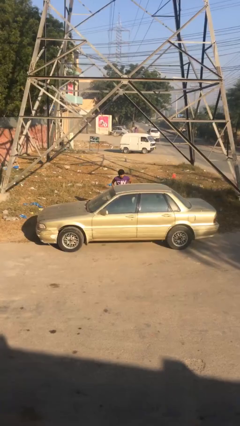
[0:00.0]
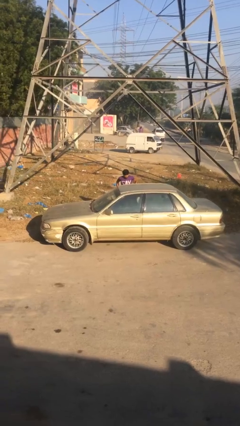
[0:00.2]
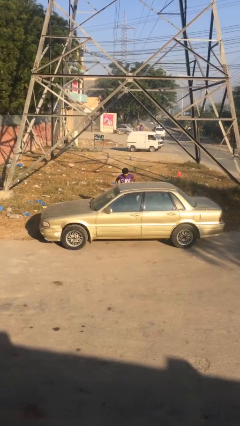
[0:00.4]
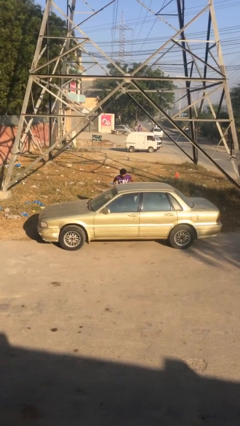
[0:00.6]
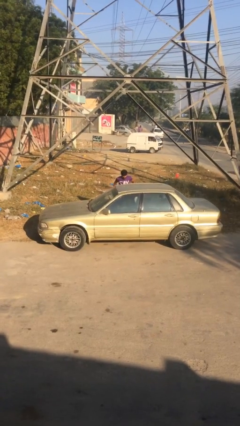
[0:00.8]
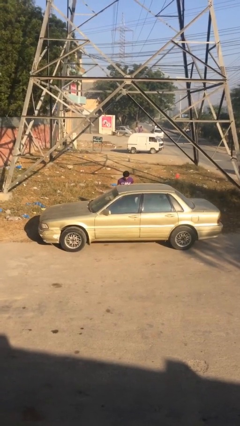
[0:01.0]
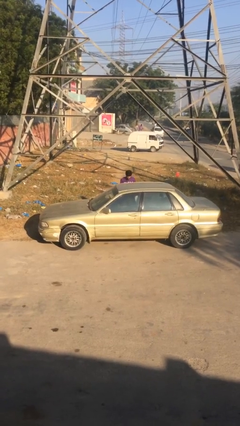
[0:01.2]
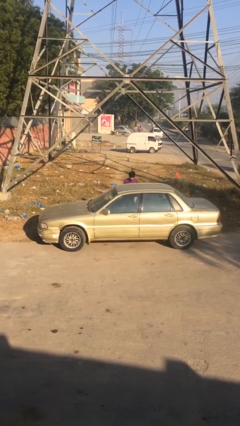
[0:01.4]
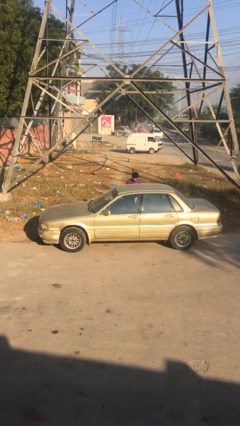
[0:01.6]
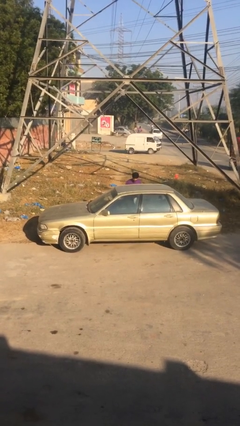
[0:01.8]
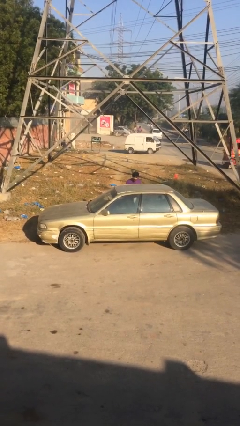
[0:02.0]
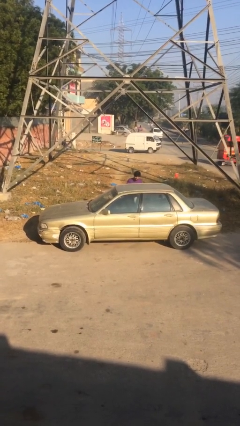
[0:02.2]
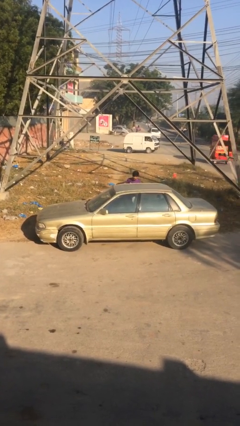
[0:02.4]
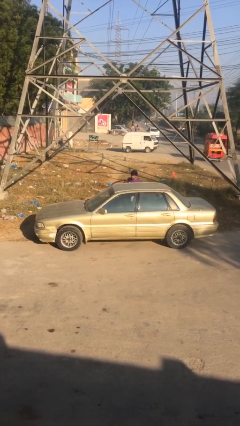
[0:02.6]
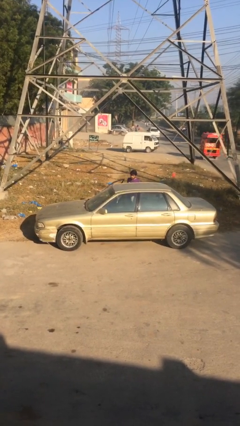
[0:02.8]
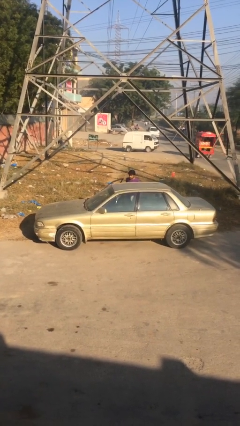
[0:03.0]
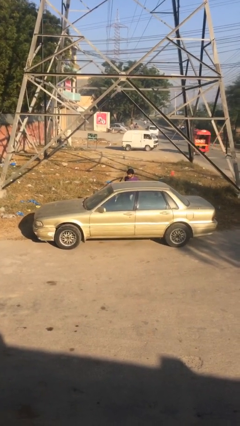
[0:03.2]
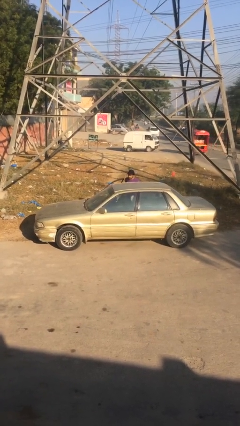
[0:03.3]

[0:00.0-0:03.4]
person opens car door

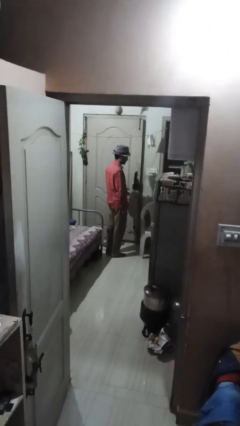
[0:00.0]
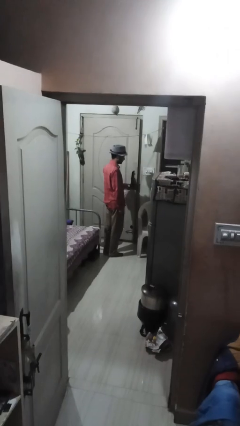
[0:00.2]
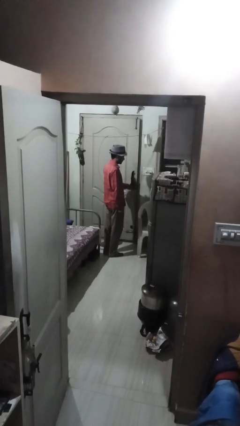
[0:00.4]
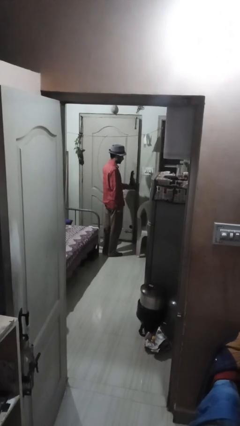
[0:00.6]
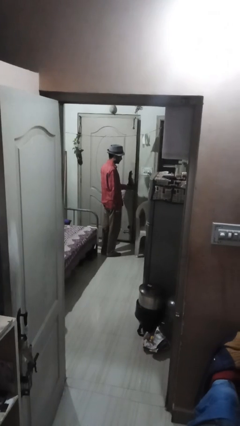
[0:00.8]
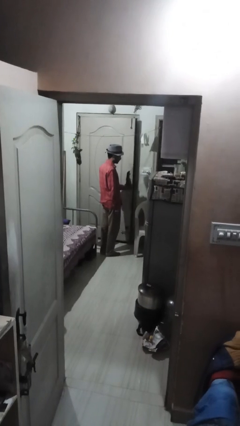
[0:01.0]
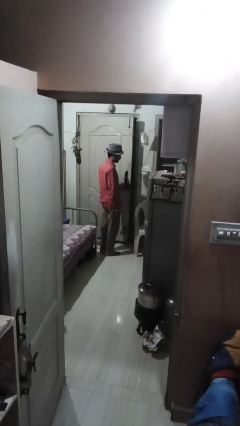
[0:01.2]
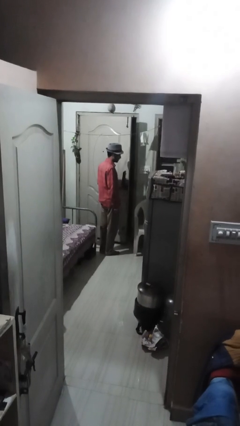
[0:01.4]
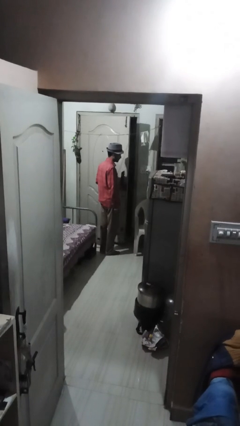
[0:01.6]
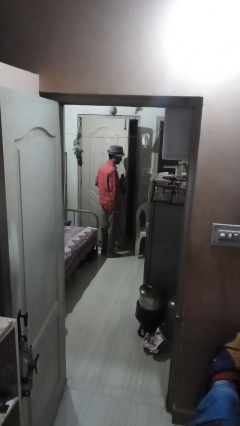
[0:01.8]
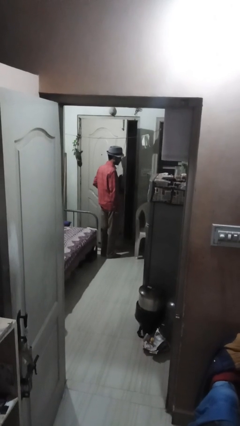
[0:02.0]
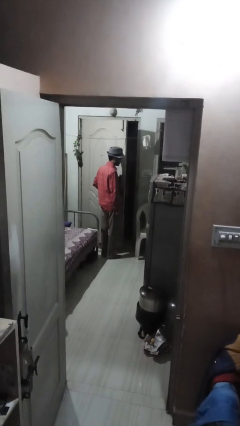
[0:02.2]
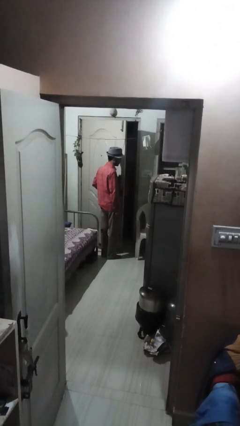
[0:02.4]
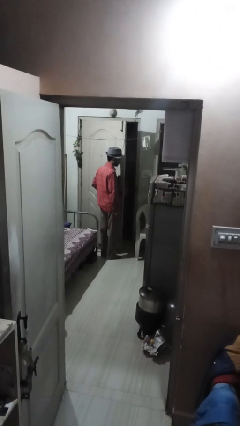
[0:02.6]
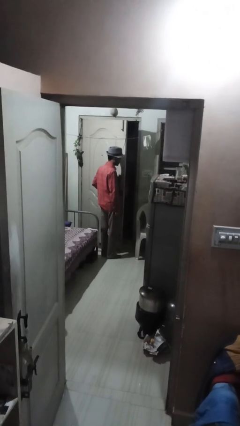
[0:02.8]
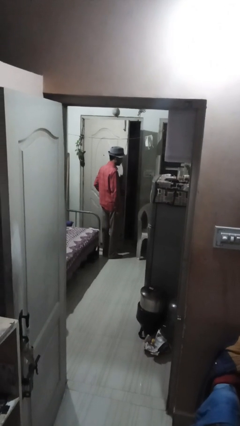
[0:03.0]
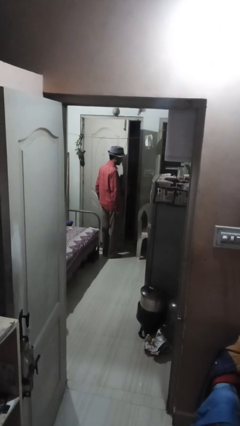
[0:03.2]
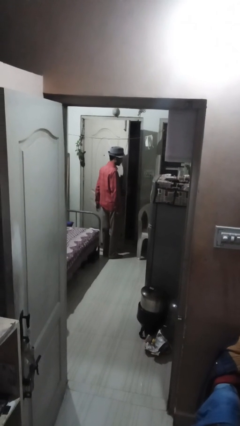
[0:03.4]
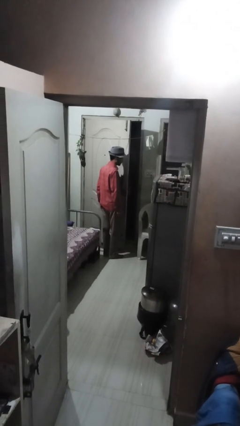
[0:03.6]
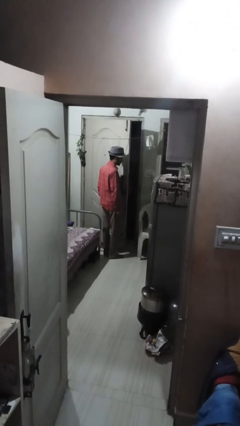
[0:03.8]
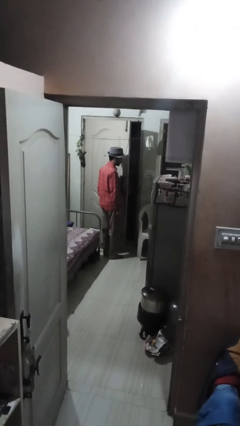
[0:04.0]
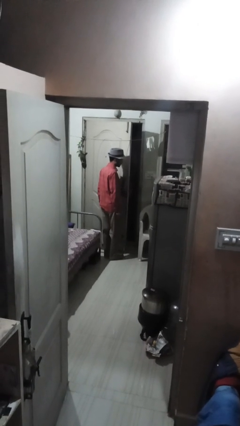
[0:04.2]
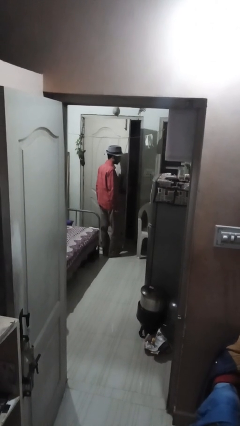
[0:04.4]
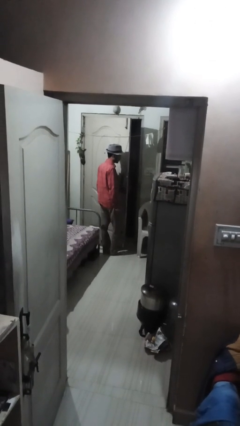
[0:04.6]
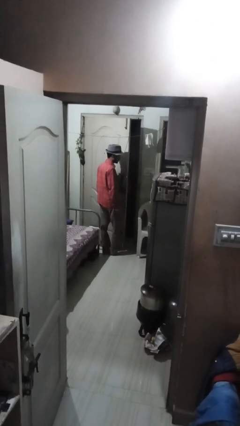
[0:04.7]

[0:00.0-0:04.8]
person opens facility door

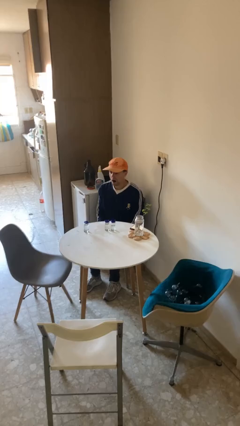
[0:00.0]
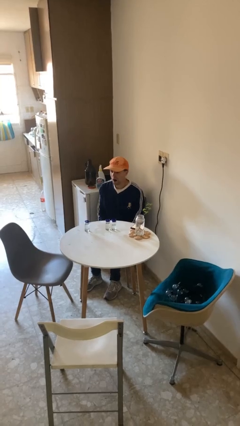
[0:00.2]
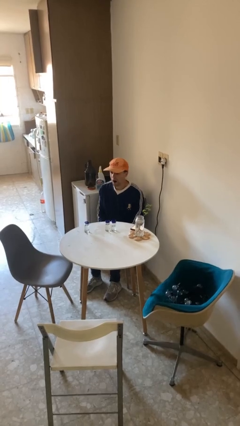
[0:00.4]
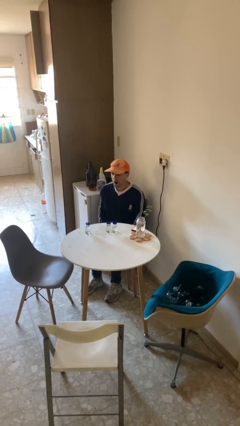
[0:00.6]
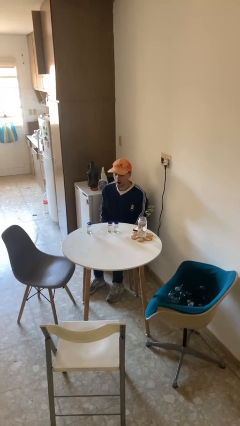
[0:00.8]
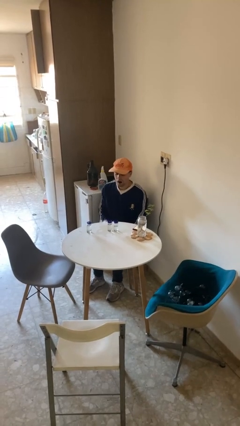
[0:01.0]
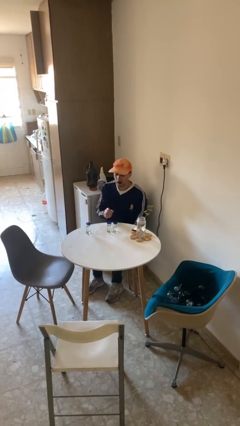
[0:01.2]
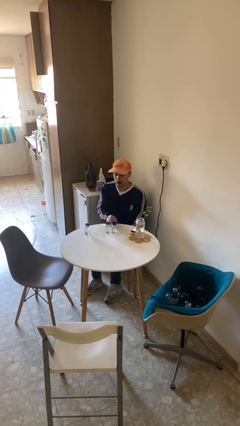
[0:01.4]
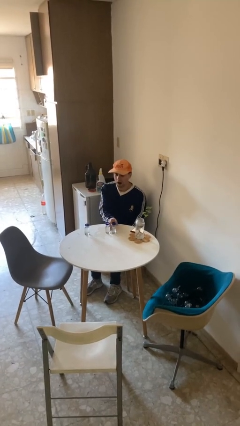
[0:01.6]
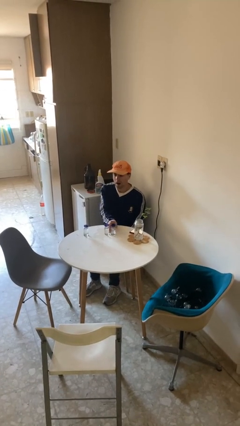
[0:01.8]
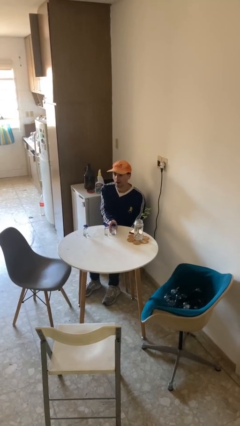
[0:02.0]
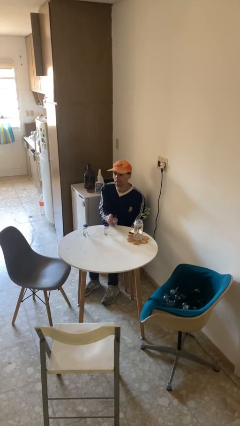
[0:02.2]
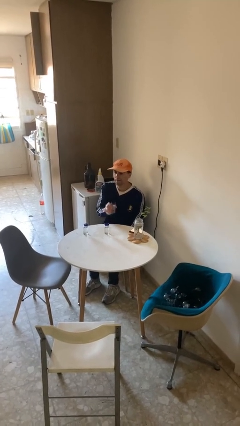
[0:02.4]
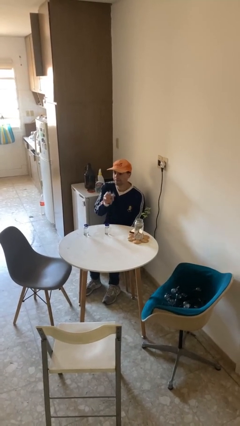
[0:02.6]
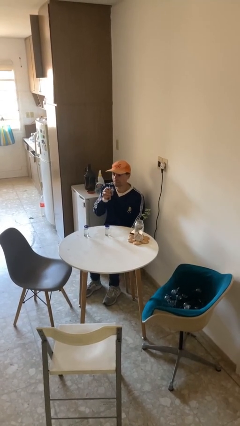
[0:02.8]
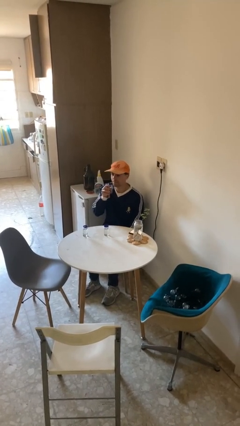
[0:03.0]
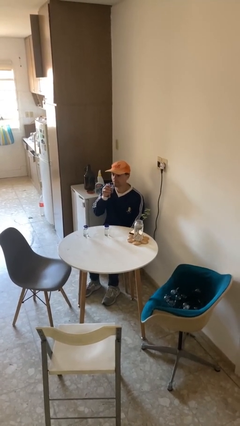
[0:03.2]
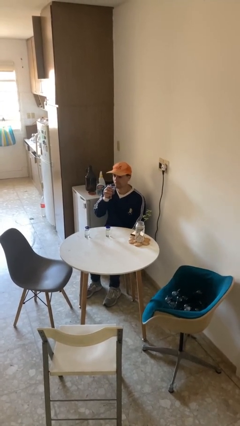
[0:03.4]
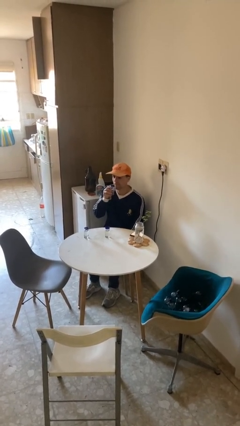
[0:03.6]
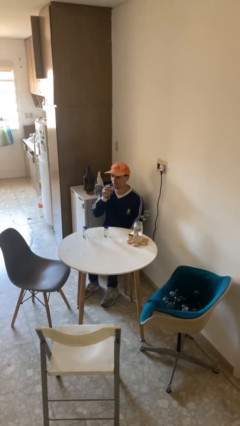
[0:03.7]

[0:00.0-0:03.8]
person picks up object from table

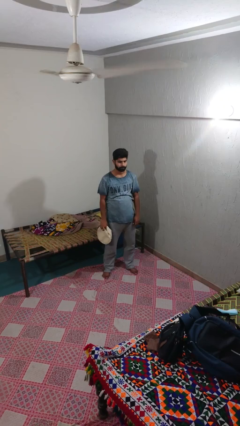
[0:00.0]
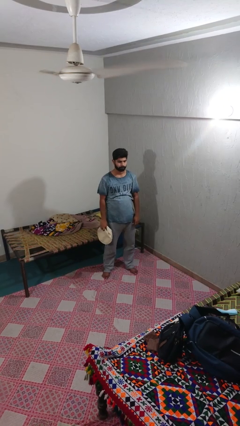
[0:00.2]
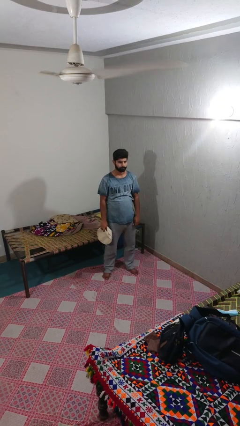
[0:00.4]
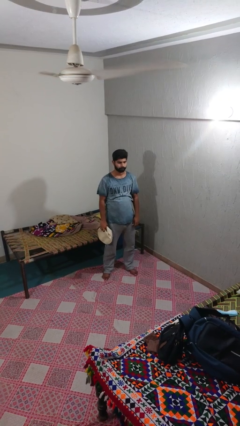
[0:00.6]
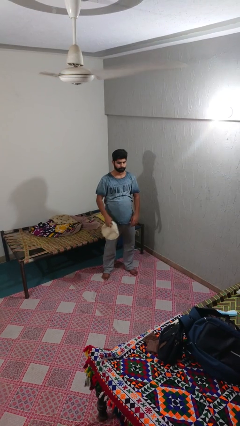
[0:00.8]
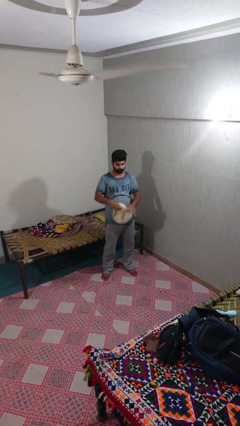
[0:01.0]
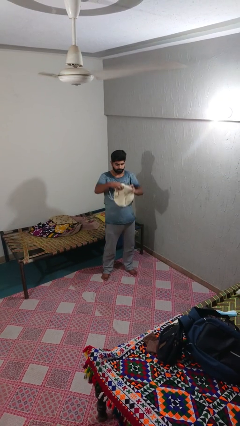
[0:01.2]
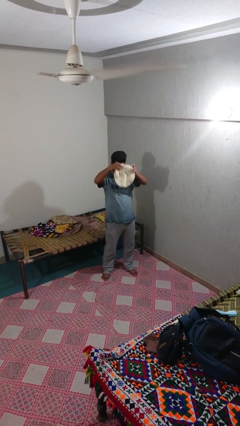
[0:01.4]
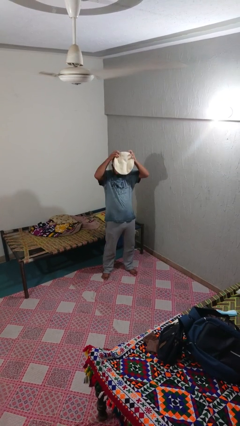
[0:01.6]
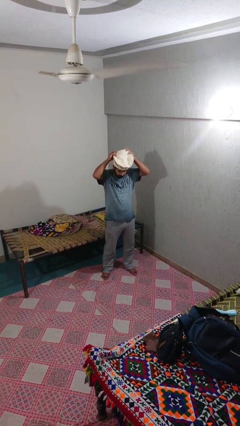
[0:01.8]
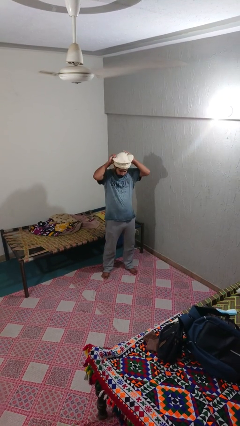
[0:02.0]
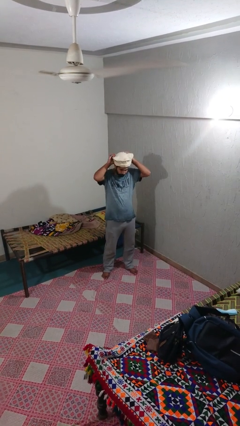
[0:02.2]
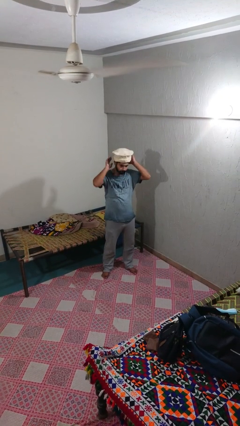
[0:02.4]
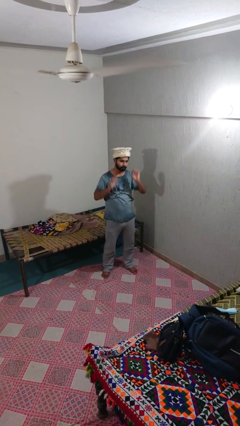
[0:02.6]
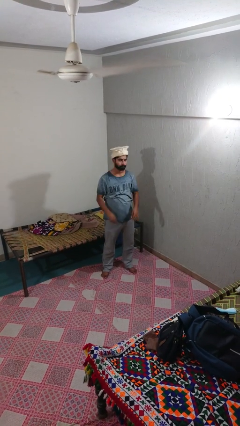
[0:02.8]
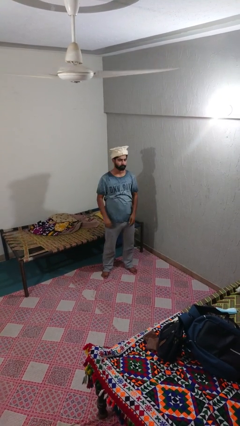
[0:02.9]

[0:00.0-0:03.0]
person puts on hat

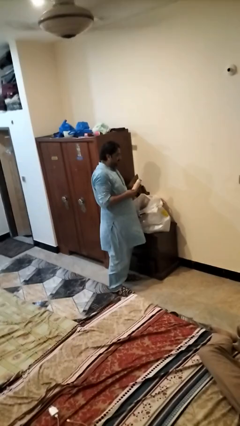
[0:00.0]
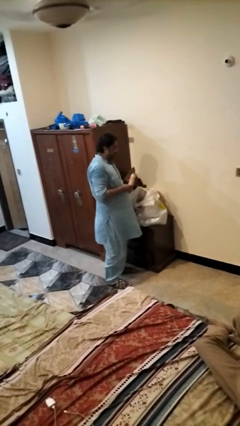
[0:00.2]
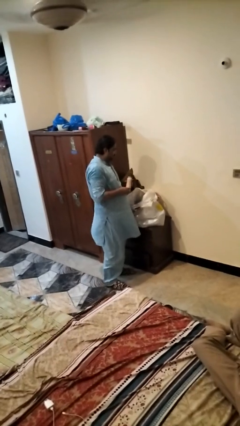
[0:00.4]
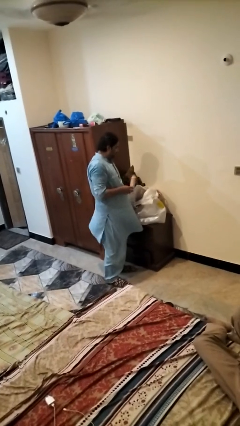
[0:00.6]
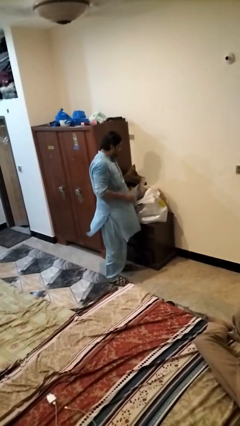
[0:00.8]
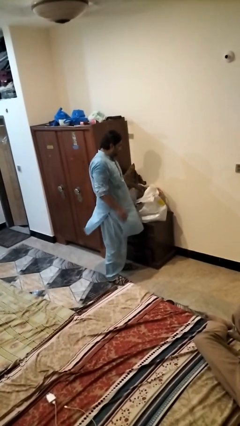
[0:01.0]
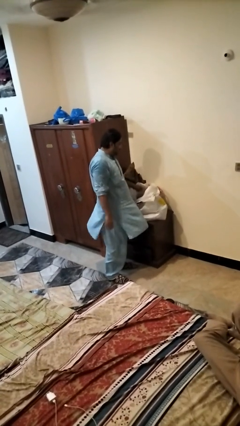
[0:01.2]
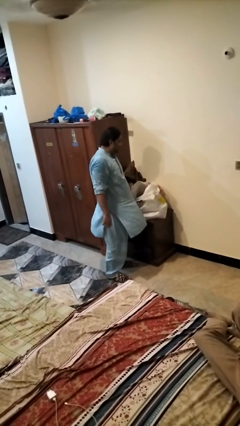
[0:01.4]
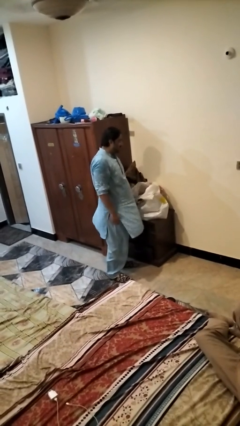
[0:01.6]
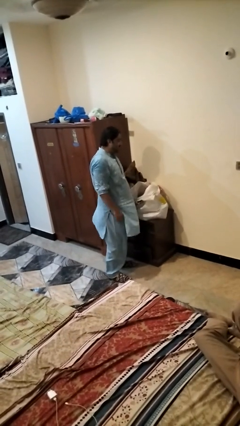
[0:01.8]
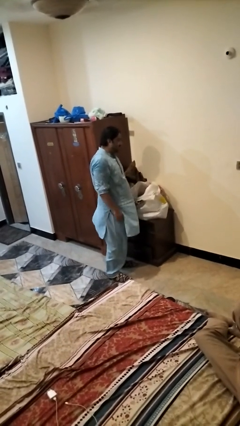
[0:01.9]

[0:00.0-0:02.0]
person puts object into bag

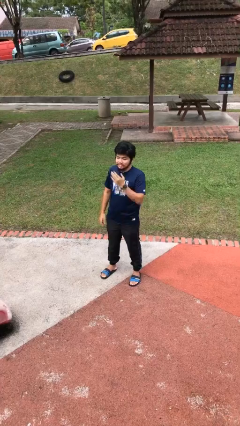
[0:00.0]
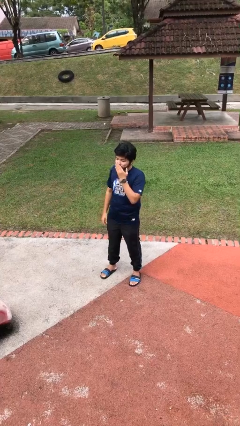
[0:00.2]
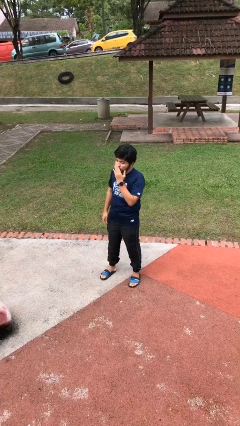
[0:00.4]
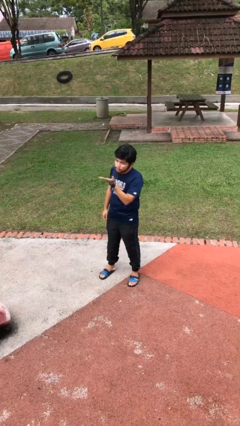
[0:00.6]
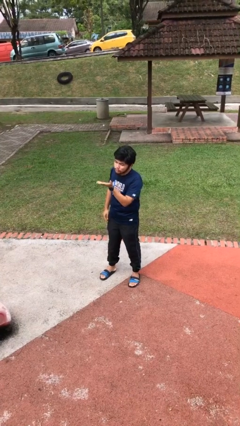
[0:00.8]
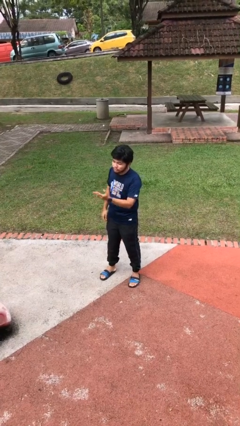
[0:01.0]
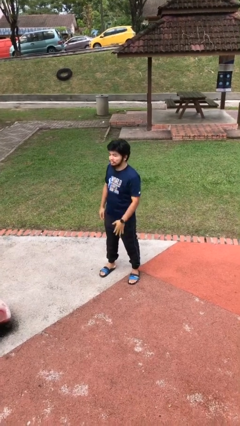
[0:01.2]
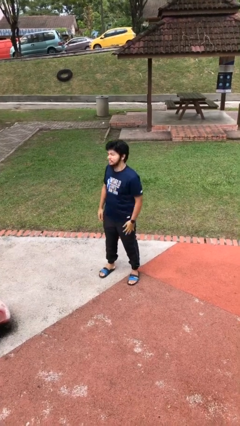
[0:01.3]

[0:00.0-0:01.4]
person gestures blow kiss
